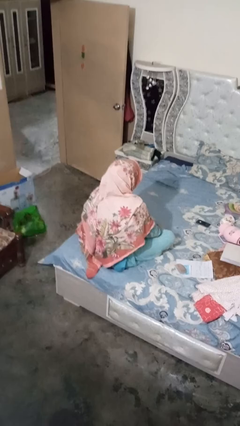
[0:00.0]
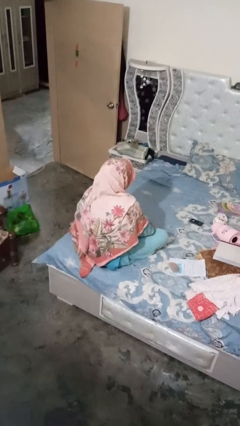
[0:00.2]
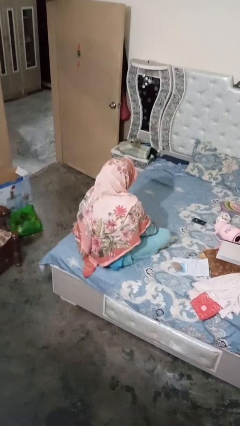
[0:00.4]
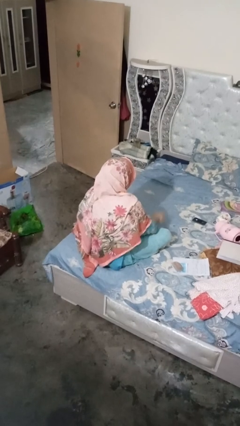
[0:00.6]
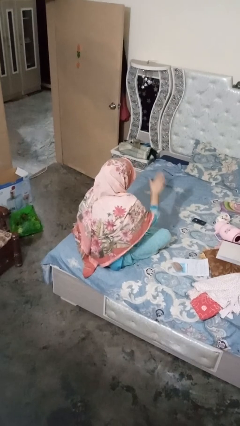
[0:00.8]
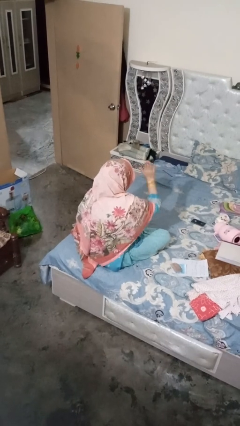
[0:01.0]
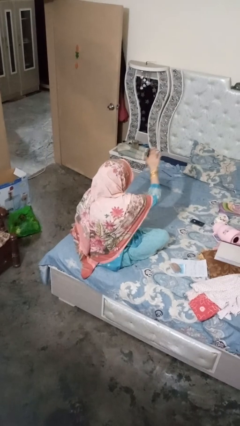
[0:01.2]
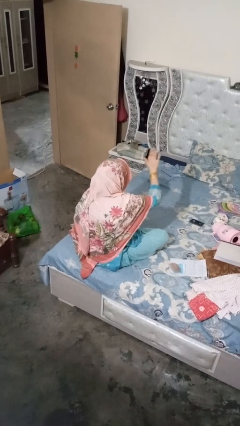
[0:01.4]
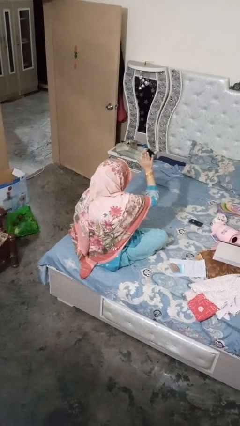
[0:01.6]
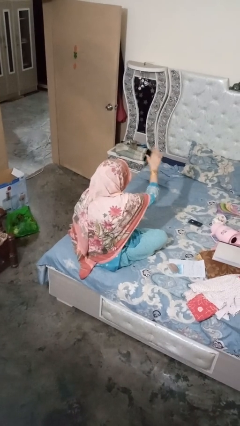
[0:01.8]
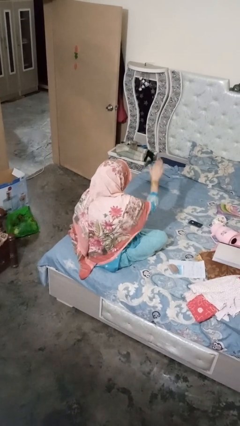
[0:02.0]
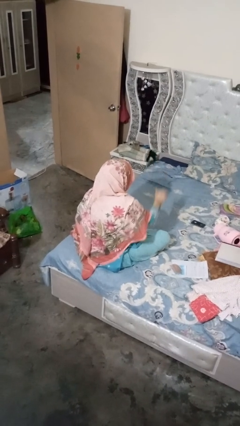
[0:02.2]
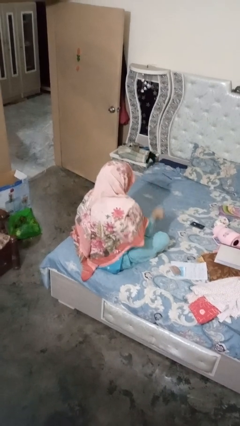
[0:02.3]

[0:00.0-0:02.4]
person gestures stop

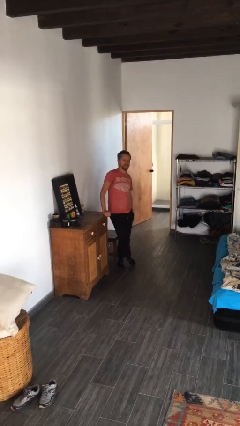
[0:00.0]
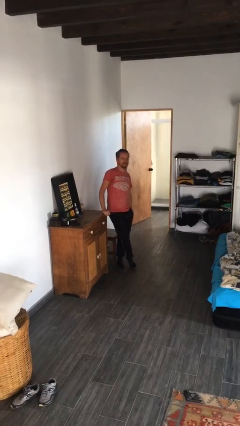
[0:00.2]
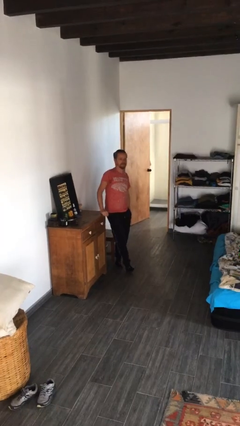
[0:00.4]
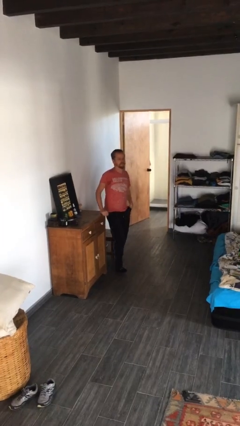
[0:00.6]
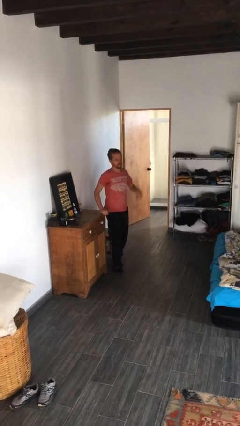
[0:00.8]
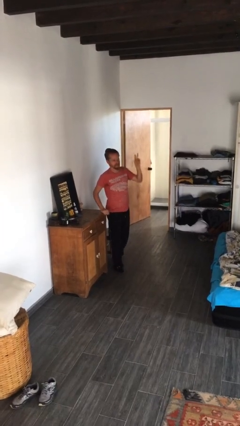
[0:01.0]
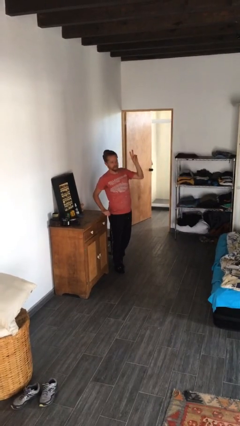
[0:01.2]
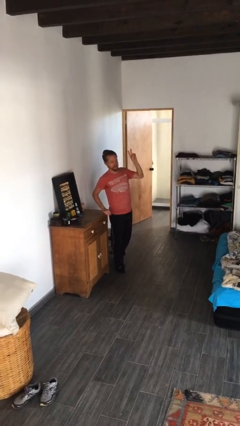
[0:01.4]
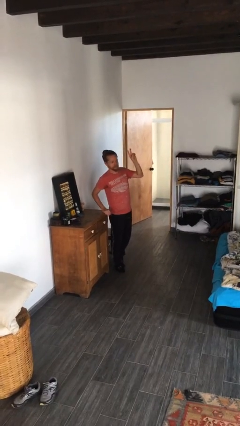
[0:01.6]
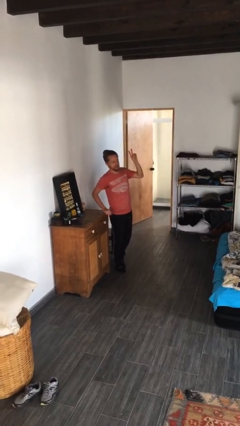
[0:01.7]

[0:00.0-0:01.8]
person gestures raise hand

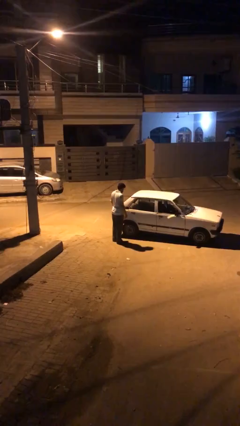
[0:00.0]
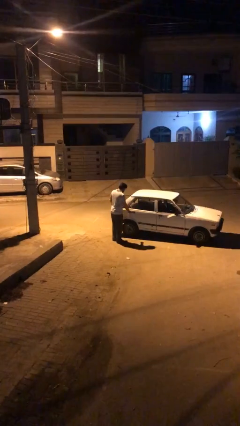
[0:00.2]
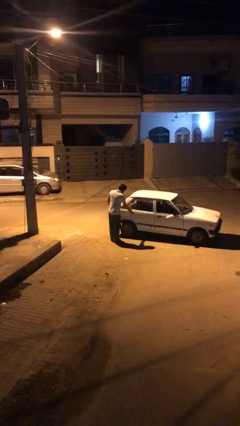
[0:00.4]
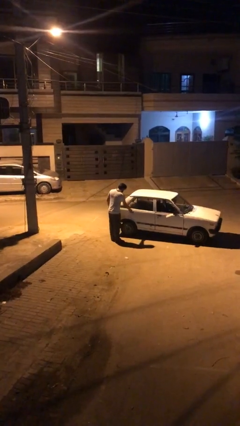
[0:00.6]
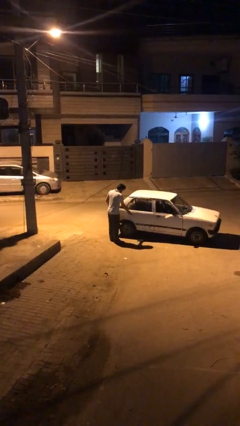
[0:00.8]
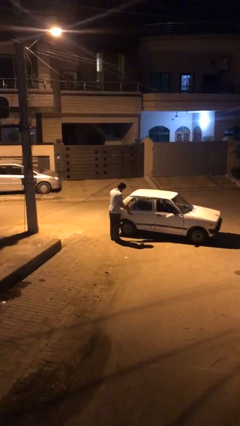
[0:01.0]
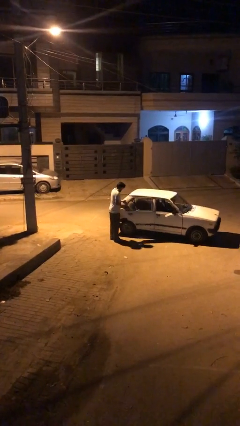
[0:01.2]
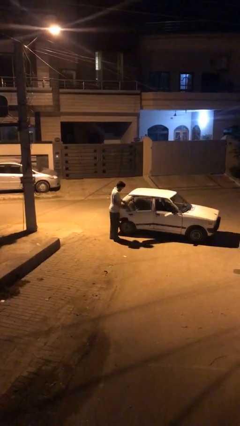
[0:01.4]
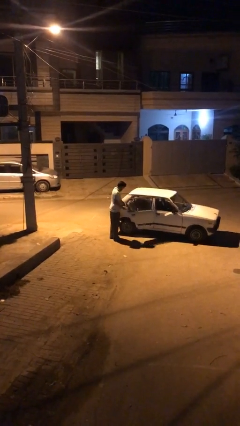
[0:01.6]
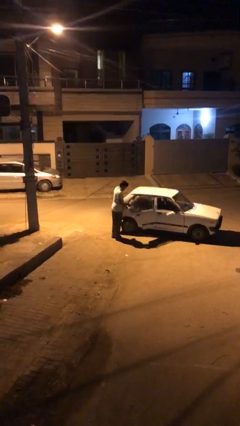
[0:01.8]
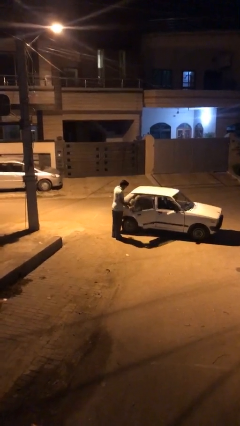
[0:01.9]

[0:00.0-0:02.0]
person opens car door

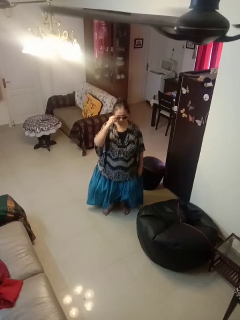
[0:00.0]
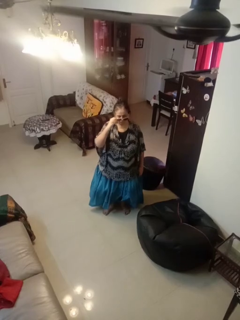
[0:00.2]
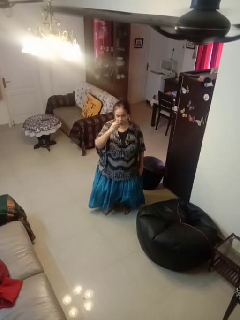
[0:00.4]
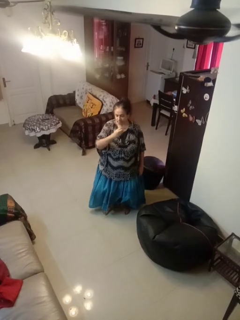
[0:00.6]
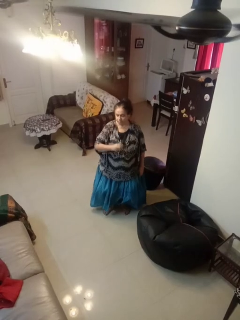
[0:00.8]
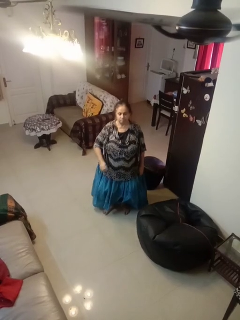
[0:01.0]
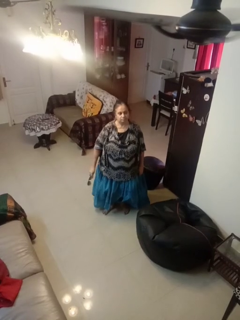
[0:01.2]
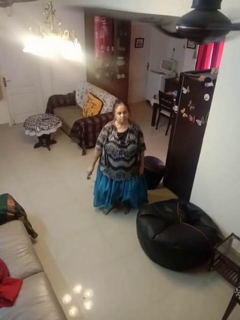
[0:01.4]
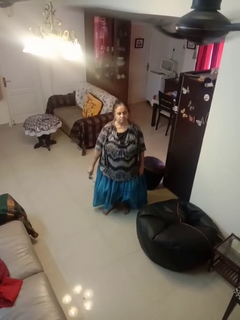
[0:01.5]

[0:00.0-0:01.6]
person takes off sunglasses

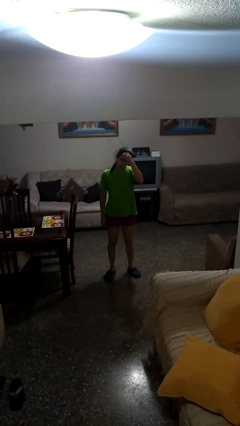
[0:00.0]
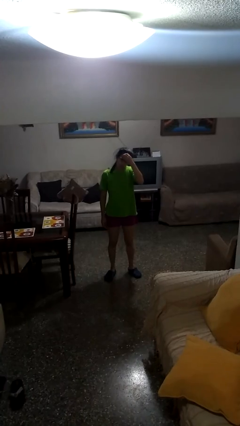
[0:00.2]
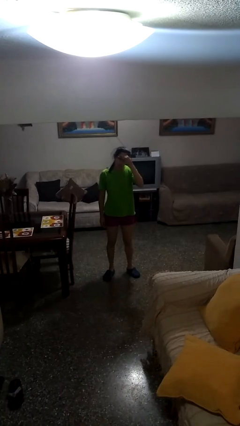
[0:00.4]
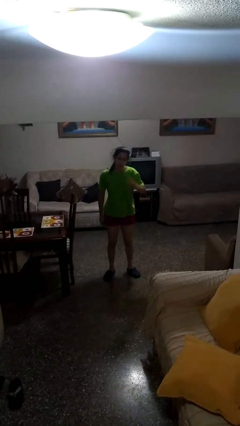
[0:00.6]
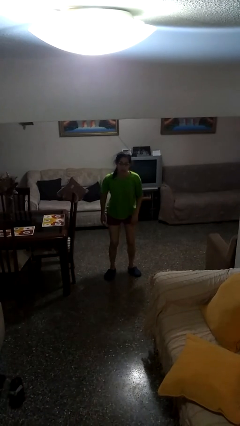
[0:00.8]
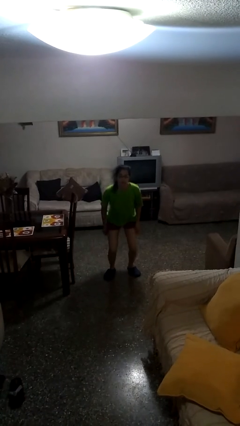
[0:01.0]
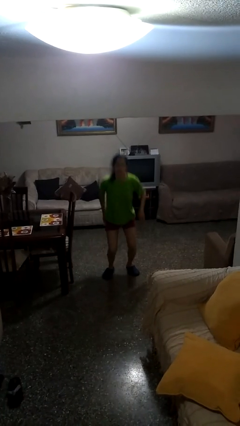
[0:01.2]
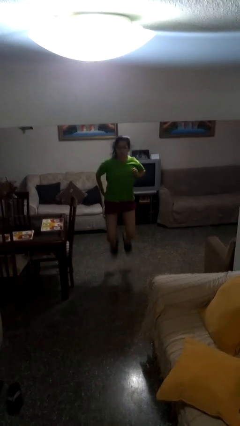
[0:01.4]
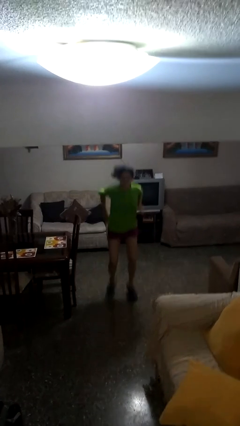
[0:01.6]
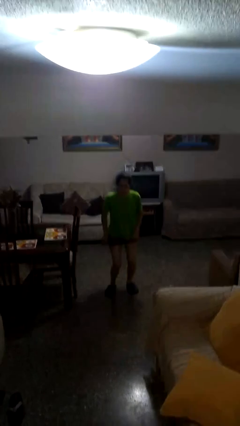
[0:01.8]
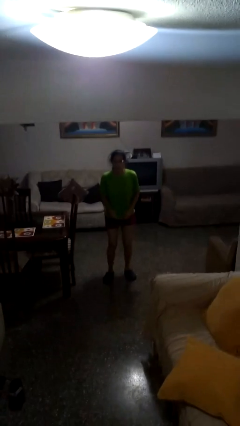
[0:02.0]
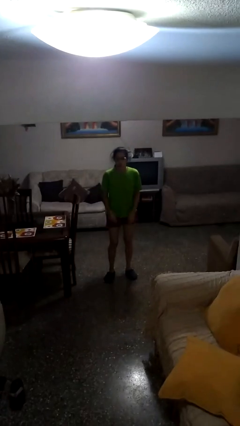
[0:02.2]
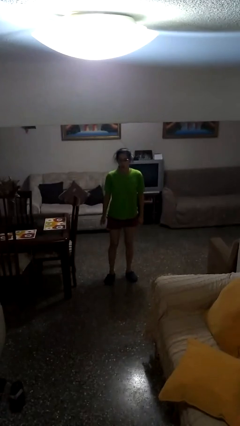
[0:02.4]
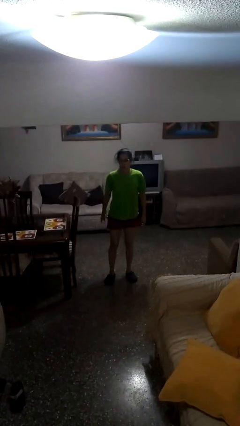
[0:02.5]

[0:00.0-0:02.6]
person jumps

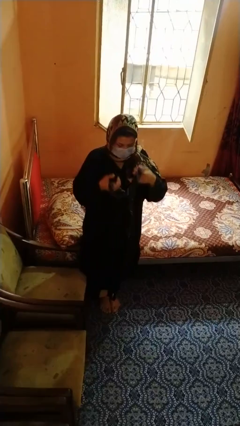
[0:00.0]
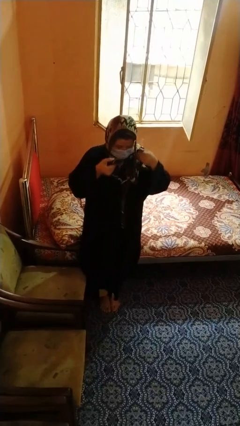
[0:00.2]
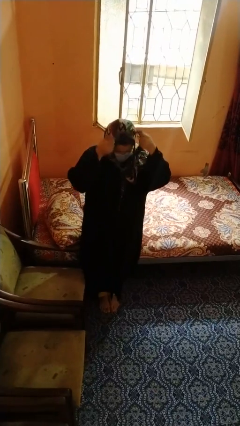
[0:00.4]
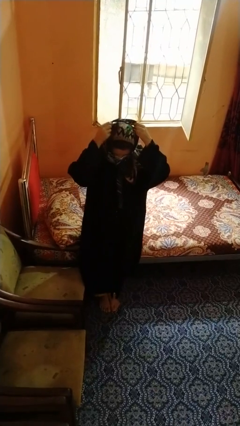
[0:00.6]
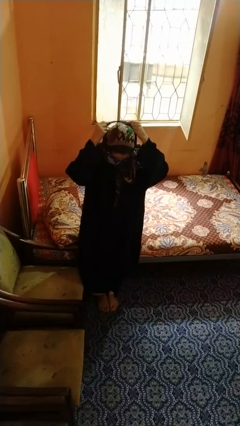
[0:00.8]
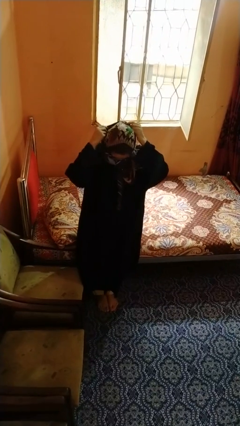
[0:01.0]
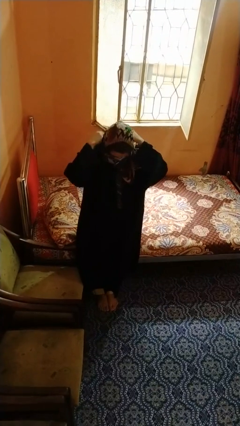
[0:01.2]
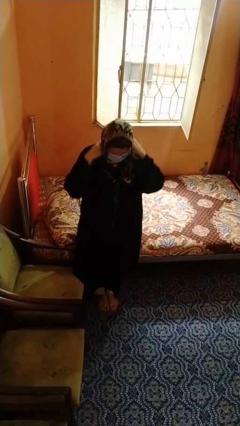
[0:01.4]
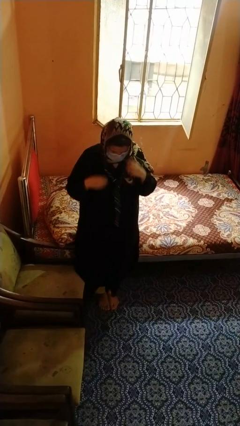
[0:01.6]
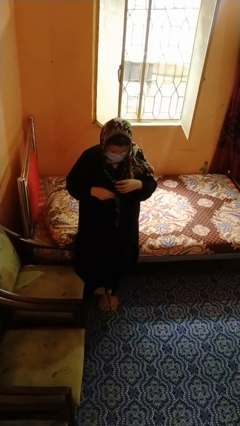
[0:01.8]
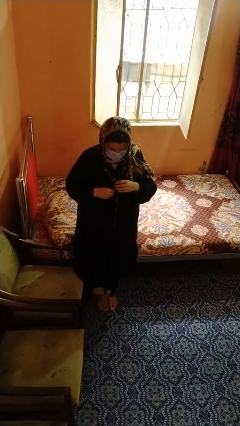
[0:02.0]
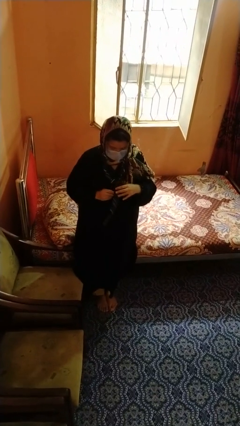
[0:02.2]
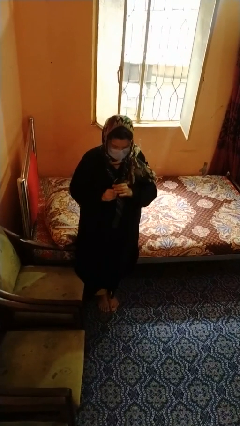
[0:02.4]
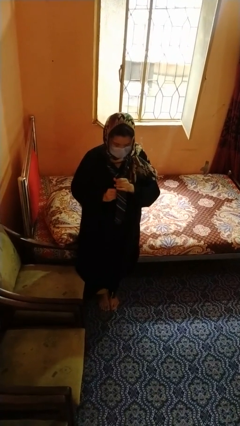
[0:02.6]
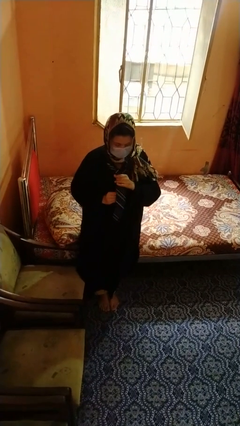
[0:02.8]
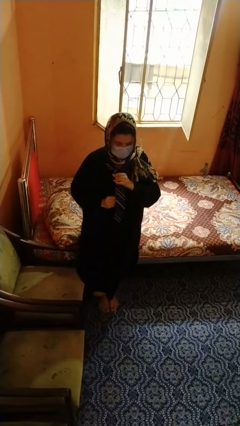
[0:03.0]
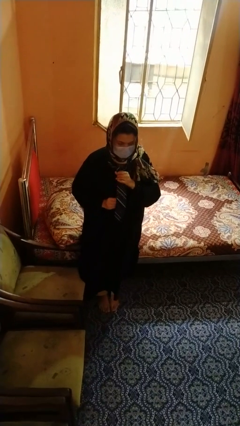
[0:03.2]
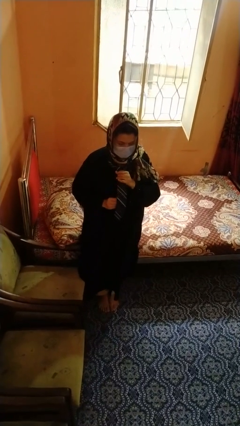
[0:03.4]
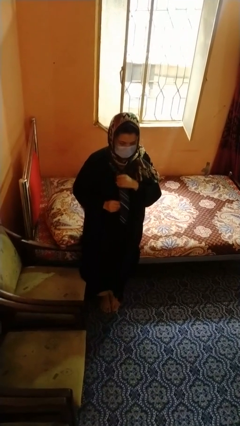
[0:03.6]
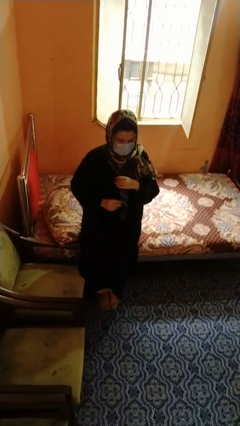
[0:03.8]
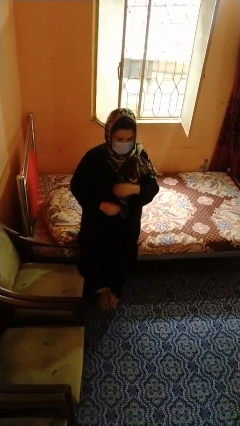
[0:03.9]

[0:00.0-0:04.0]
person puts on necktie

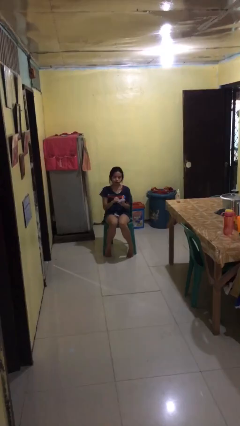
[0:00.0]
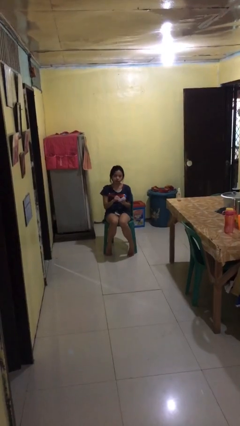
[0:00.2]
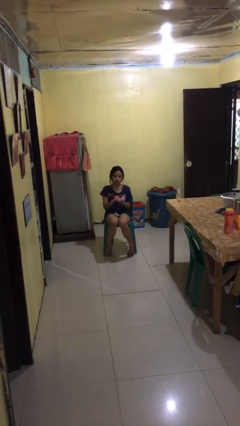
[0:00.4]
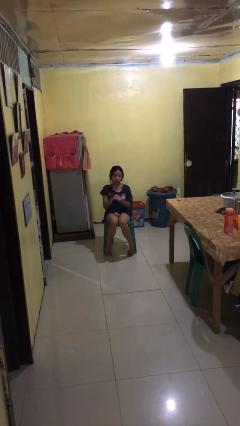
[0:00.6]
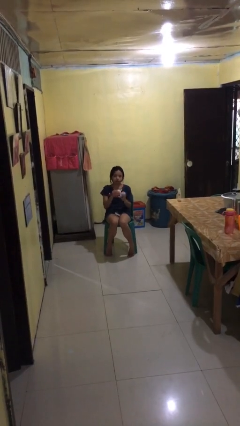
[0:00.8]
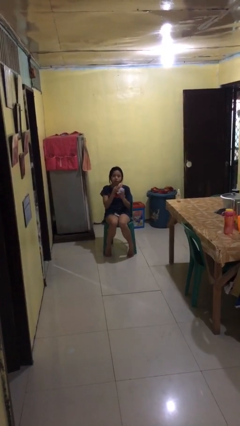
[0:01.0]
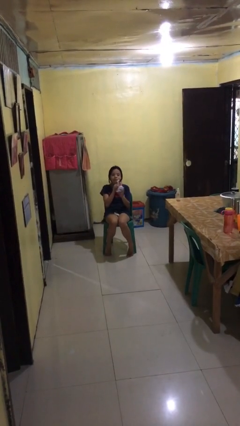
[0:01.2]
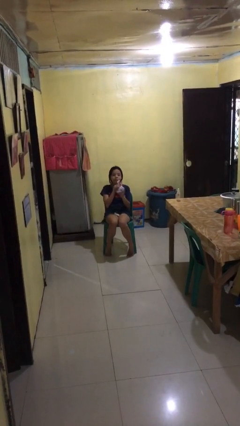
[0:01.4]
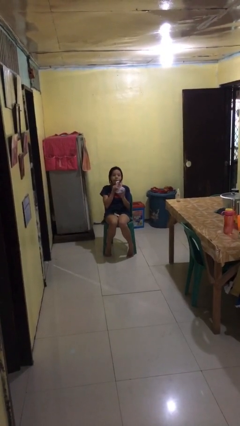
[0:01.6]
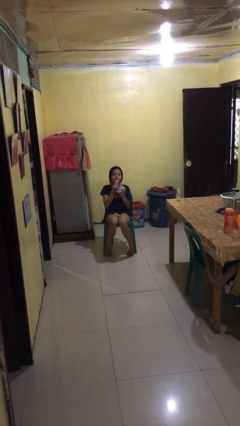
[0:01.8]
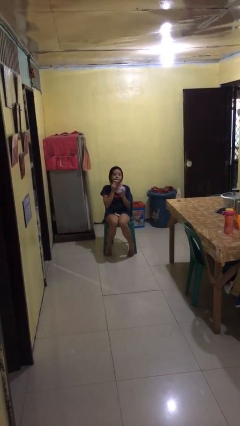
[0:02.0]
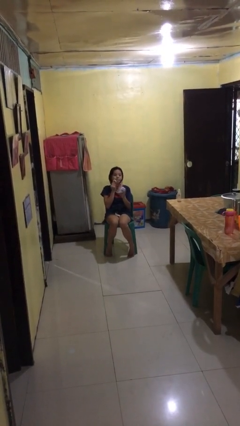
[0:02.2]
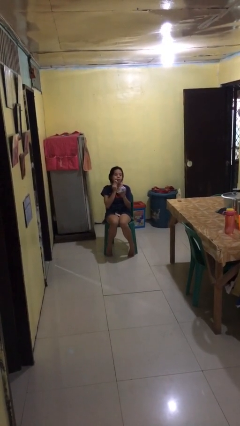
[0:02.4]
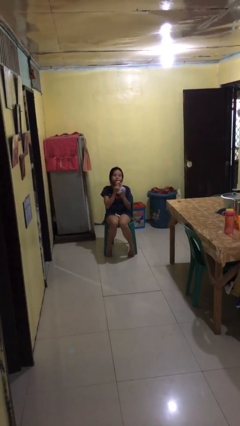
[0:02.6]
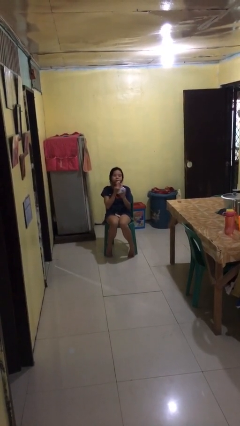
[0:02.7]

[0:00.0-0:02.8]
person applies foundation makeup

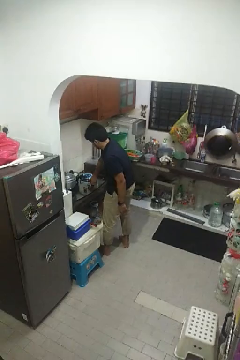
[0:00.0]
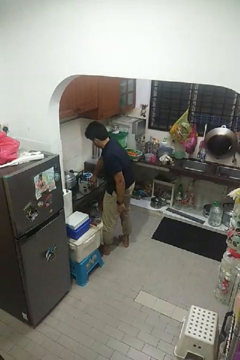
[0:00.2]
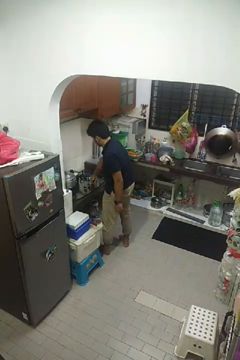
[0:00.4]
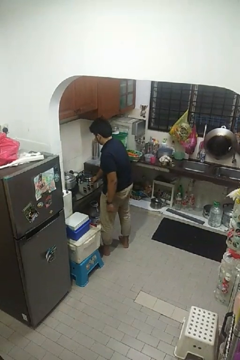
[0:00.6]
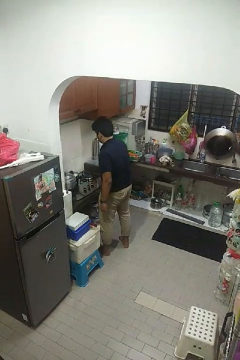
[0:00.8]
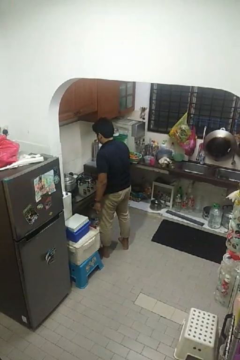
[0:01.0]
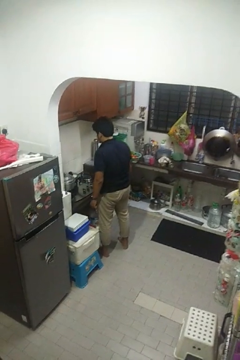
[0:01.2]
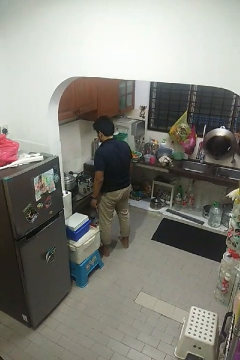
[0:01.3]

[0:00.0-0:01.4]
person turns off stovetop
